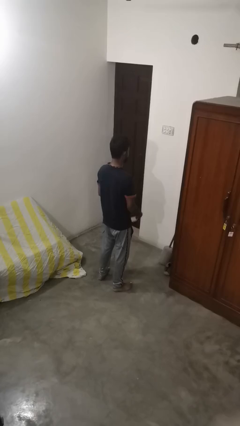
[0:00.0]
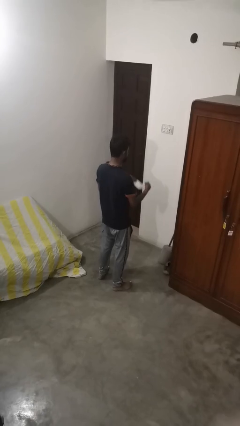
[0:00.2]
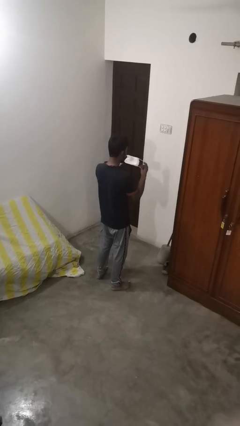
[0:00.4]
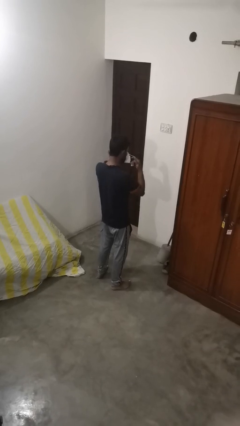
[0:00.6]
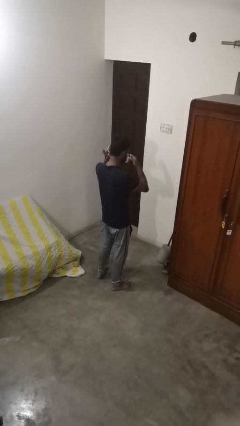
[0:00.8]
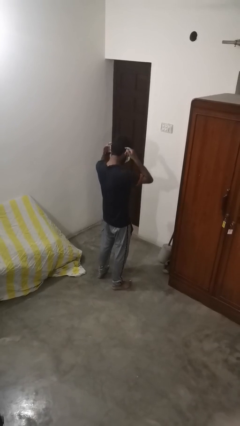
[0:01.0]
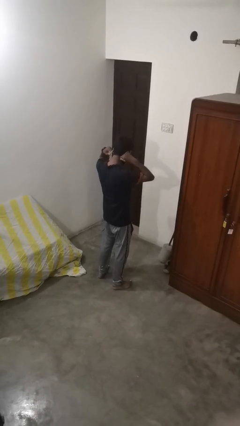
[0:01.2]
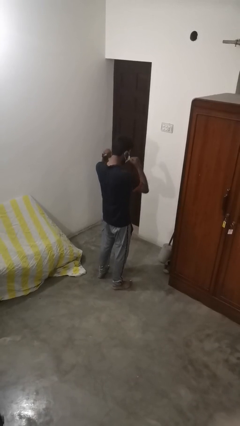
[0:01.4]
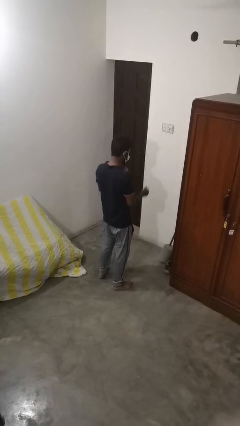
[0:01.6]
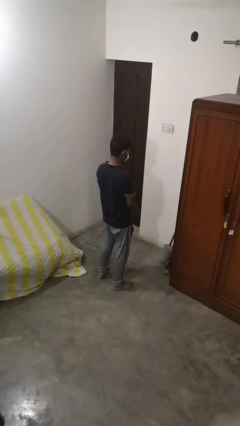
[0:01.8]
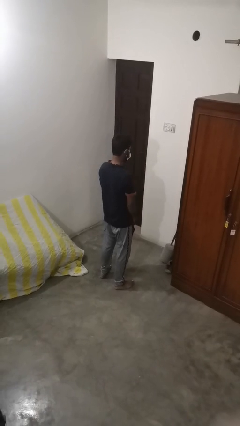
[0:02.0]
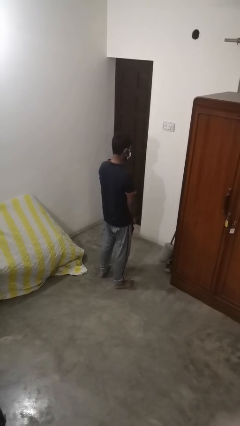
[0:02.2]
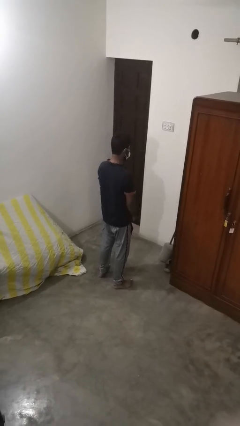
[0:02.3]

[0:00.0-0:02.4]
person puts on facemask

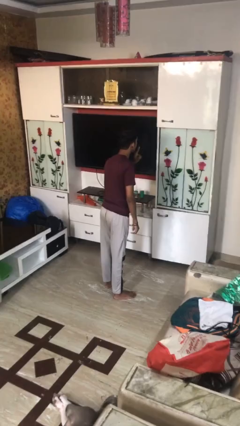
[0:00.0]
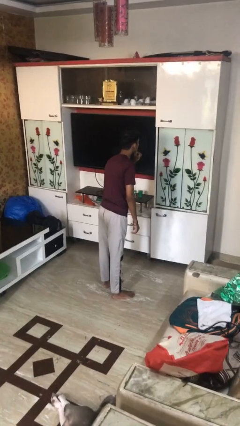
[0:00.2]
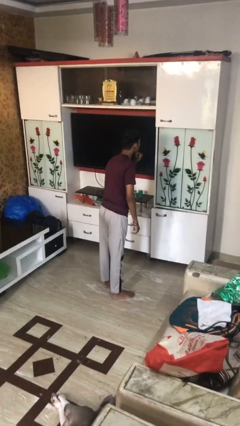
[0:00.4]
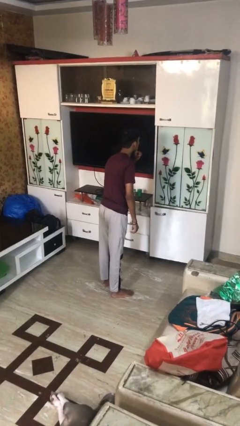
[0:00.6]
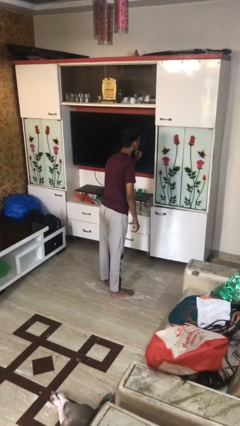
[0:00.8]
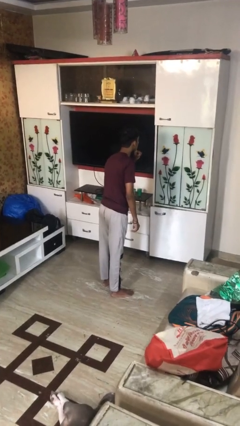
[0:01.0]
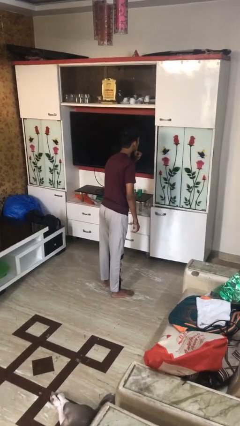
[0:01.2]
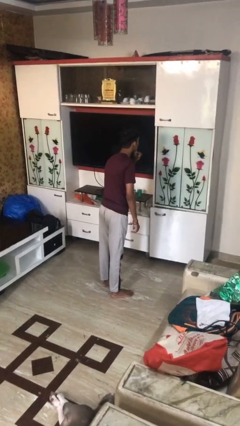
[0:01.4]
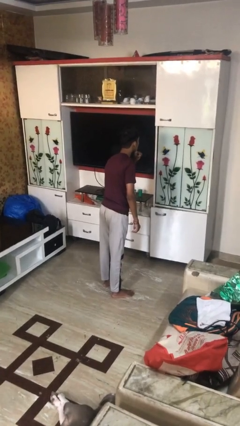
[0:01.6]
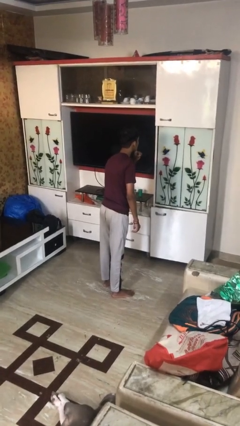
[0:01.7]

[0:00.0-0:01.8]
person gestures be quiet

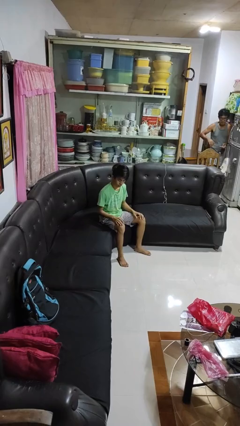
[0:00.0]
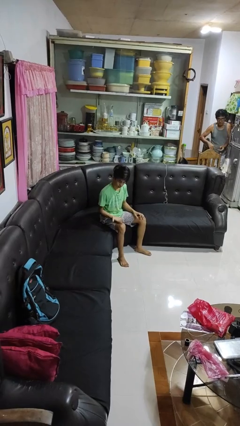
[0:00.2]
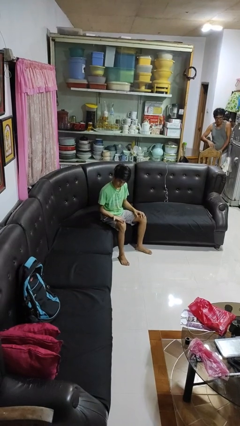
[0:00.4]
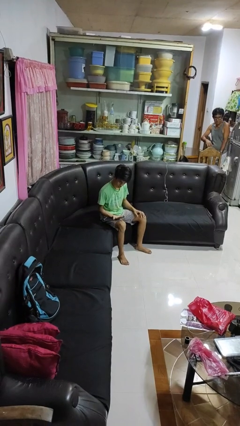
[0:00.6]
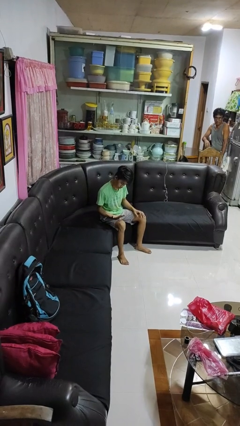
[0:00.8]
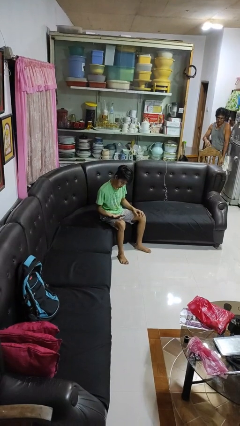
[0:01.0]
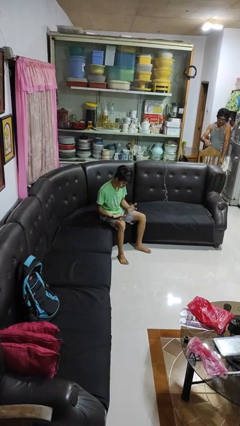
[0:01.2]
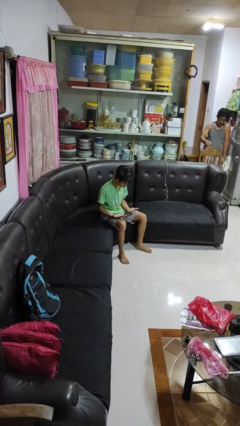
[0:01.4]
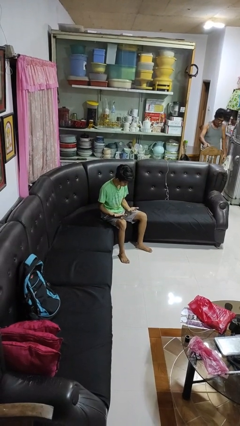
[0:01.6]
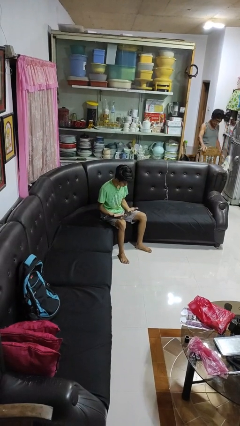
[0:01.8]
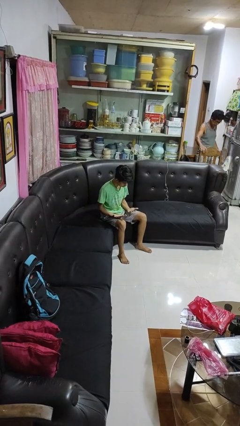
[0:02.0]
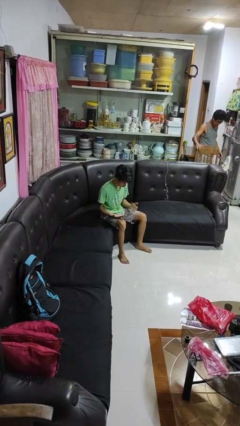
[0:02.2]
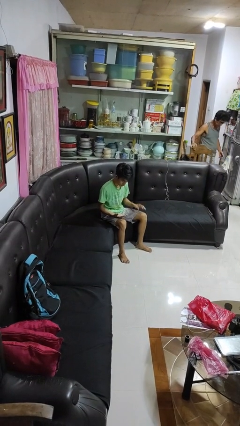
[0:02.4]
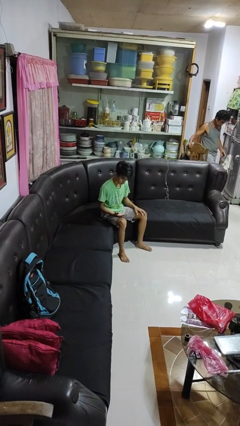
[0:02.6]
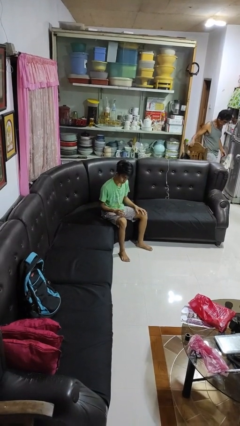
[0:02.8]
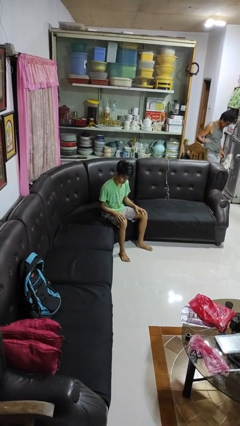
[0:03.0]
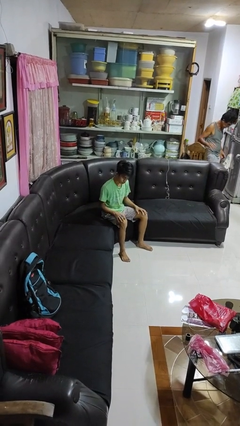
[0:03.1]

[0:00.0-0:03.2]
person looks at hands in lap

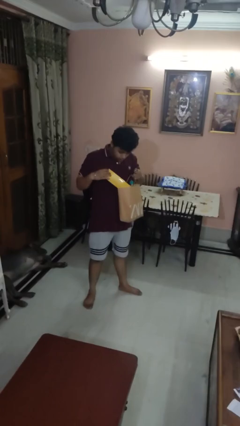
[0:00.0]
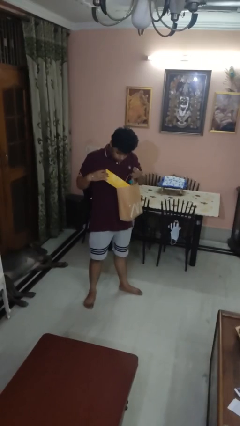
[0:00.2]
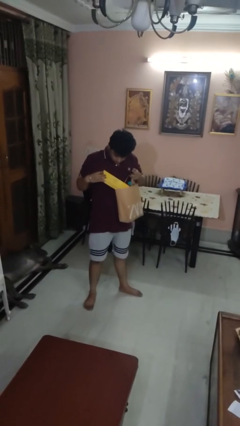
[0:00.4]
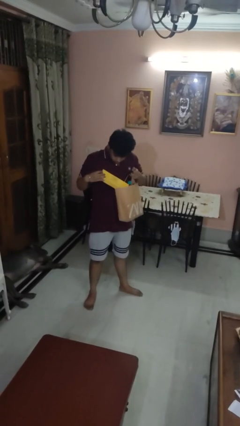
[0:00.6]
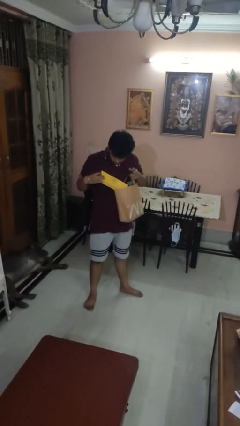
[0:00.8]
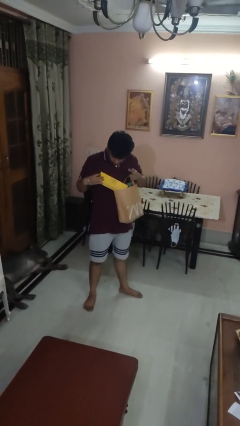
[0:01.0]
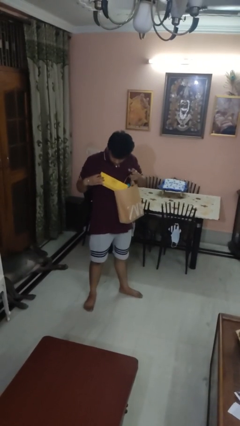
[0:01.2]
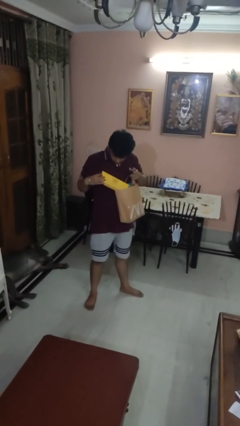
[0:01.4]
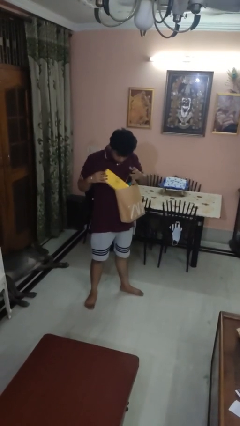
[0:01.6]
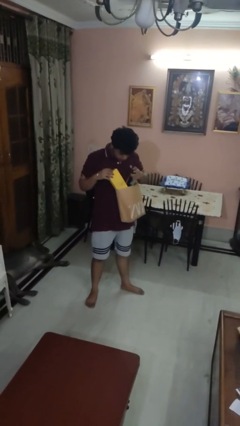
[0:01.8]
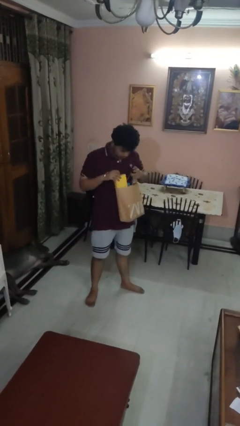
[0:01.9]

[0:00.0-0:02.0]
person takes object from bag

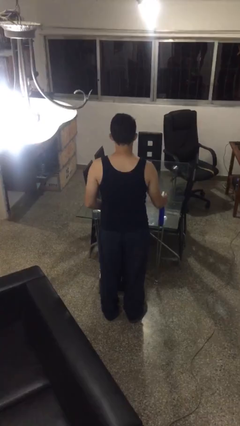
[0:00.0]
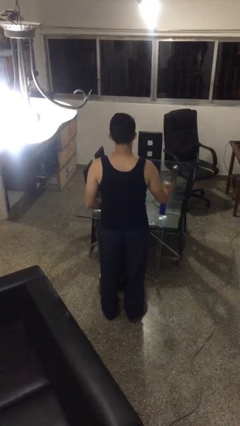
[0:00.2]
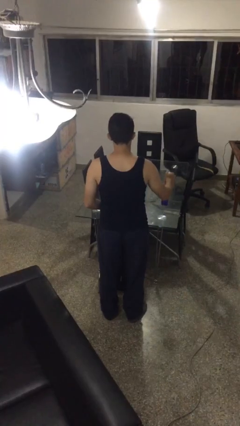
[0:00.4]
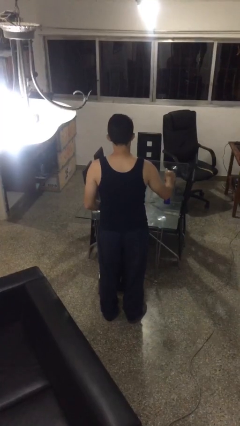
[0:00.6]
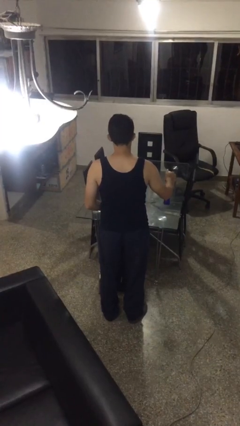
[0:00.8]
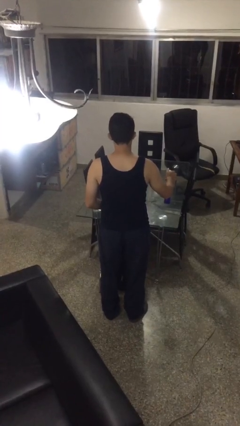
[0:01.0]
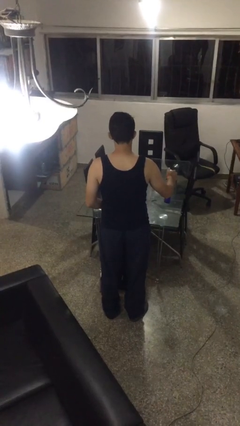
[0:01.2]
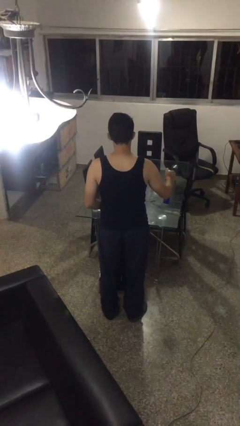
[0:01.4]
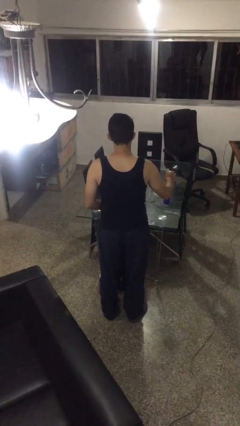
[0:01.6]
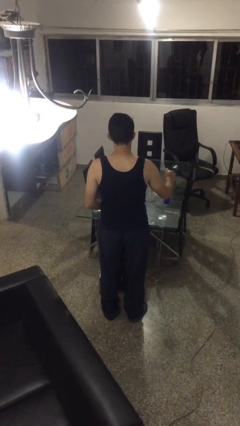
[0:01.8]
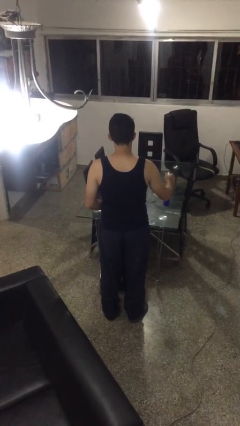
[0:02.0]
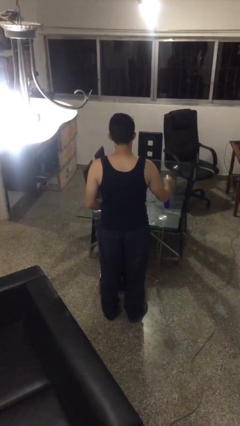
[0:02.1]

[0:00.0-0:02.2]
person sprays from bottle

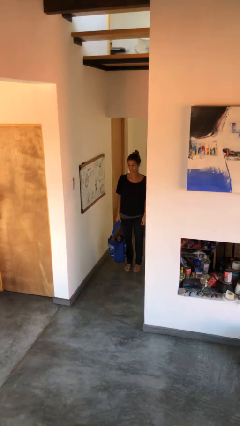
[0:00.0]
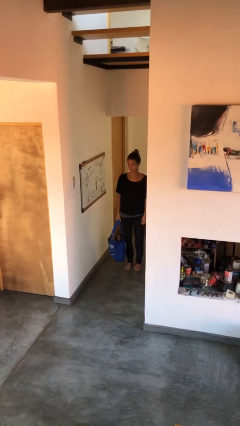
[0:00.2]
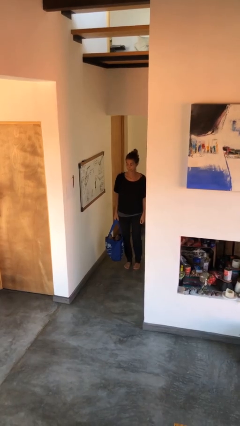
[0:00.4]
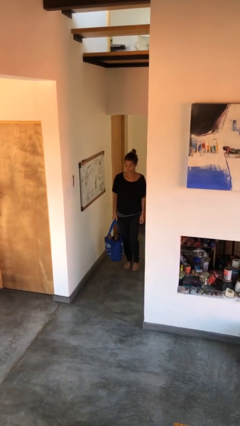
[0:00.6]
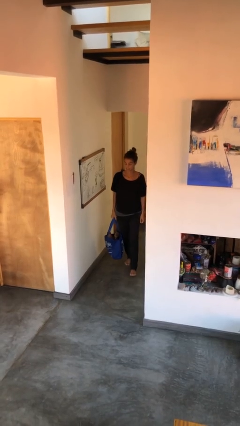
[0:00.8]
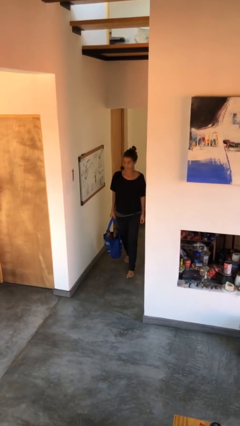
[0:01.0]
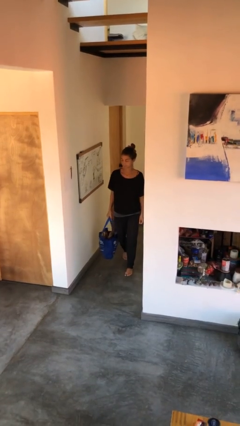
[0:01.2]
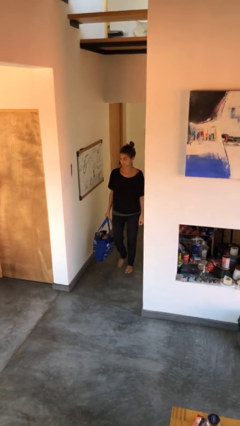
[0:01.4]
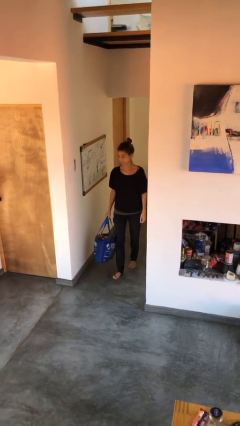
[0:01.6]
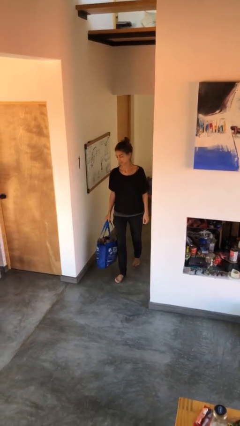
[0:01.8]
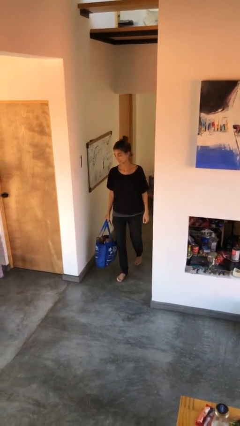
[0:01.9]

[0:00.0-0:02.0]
person carries groceries

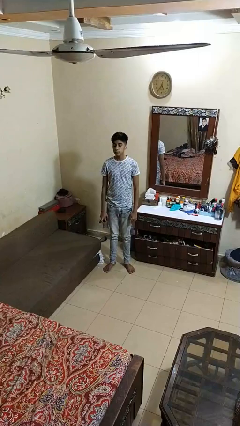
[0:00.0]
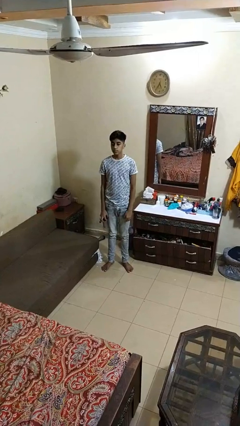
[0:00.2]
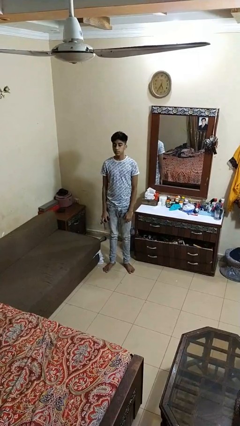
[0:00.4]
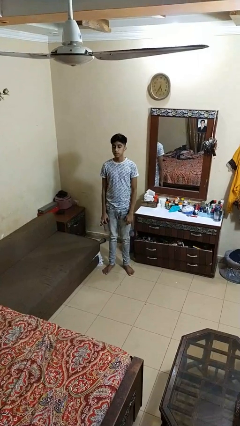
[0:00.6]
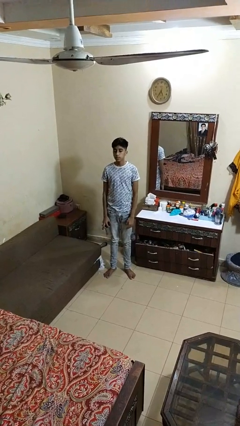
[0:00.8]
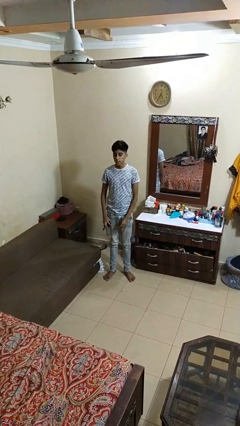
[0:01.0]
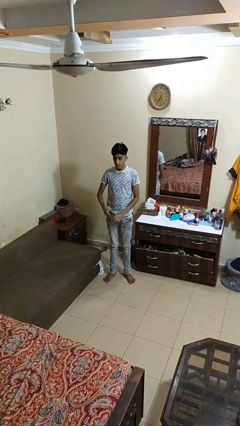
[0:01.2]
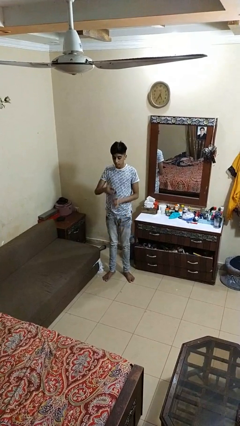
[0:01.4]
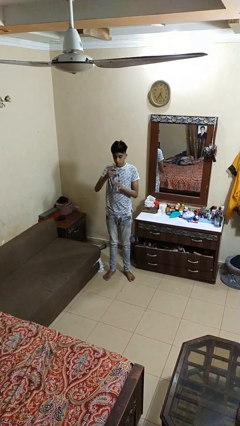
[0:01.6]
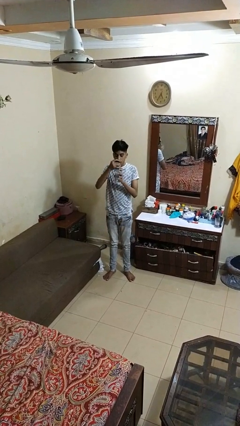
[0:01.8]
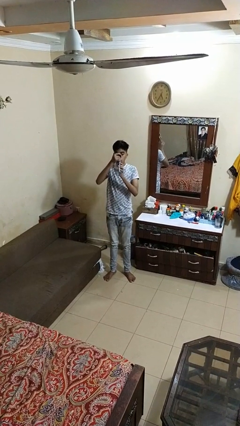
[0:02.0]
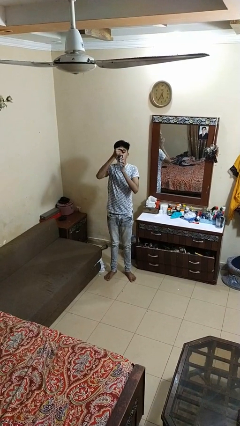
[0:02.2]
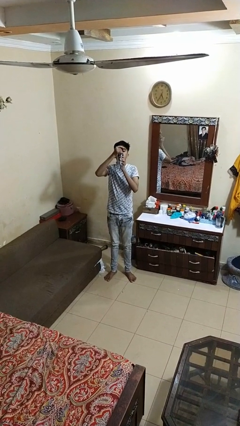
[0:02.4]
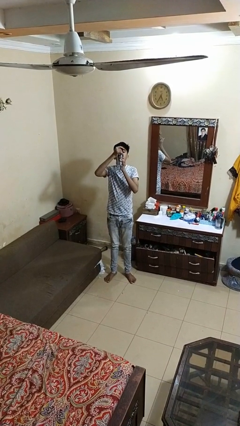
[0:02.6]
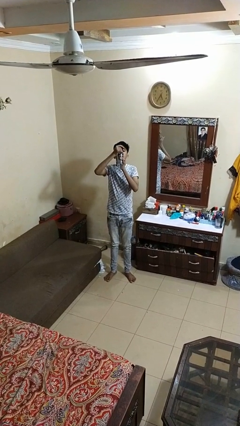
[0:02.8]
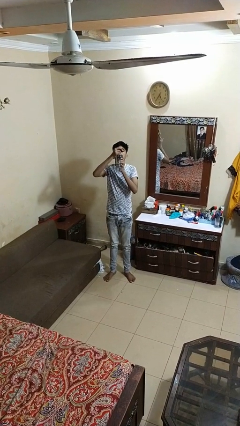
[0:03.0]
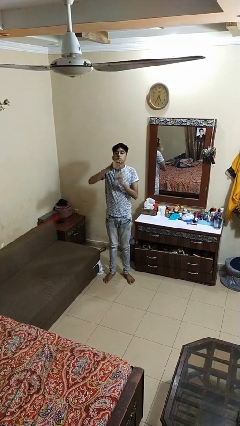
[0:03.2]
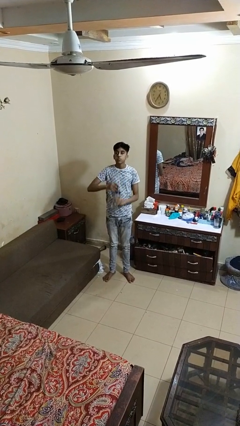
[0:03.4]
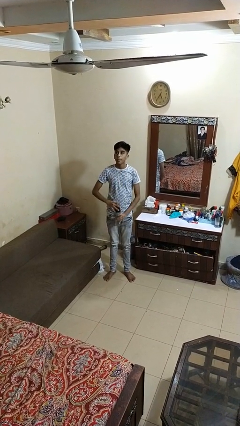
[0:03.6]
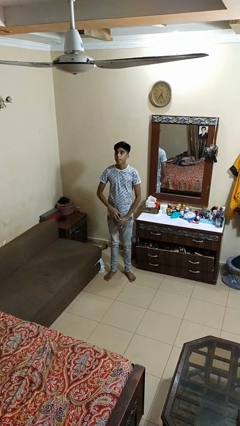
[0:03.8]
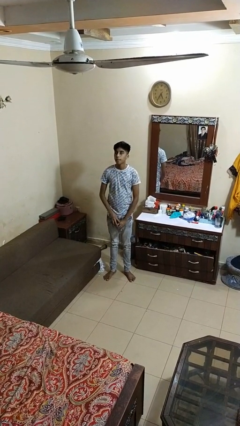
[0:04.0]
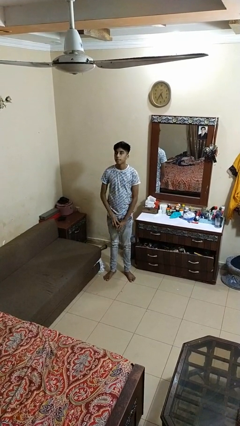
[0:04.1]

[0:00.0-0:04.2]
person drinks from bottle
